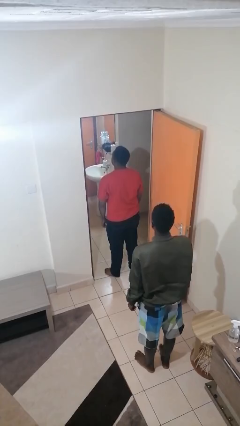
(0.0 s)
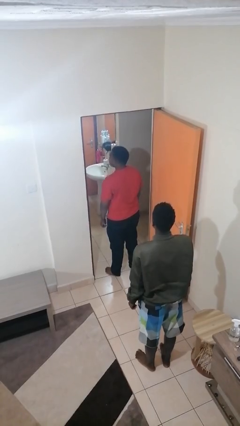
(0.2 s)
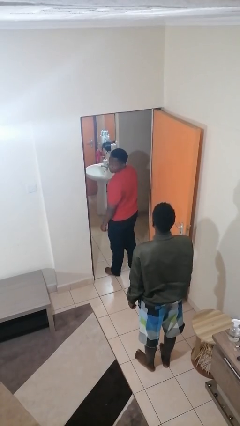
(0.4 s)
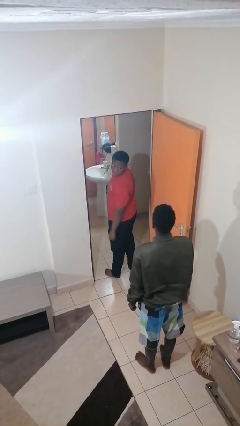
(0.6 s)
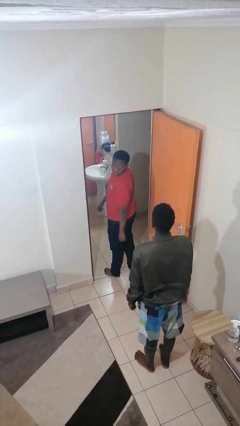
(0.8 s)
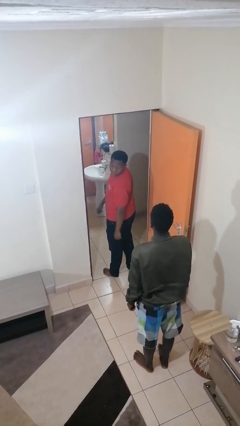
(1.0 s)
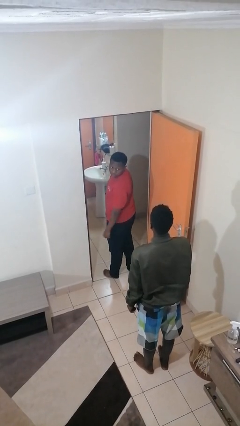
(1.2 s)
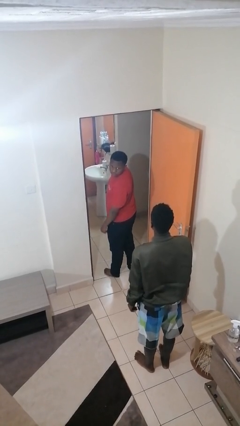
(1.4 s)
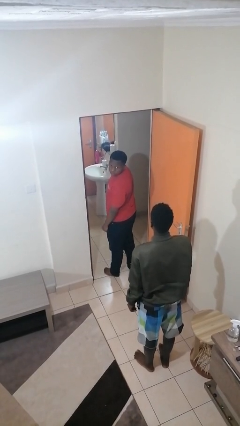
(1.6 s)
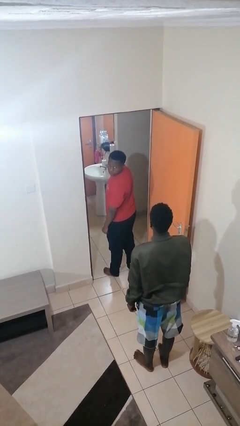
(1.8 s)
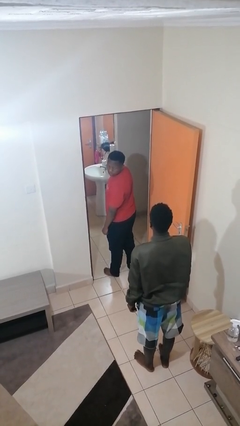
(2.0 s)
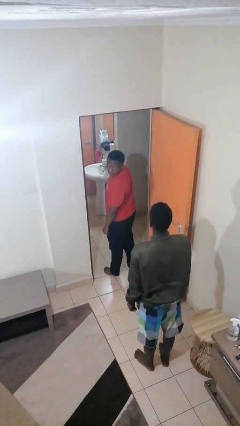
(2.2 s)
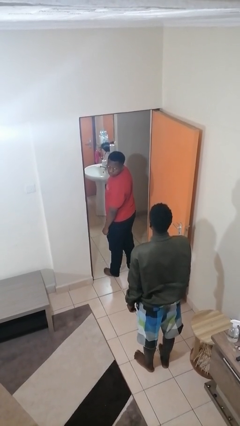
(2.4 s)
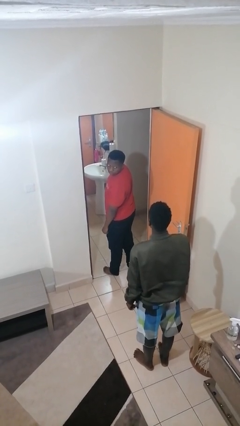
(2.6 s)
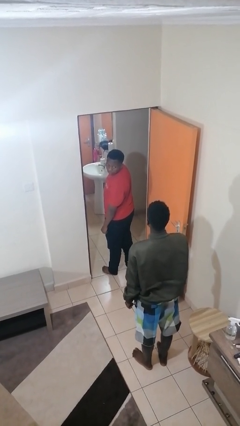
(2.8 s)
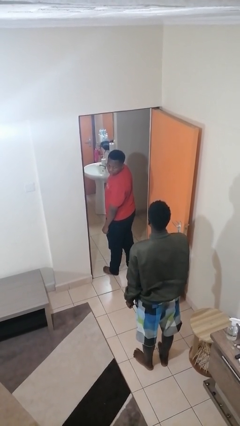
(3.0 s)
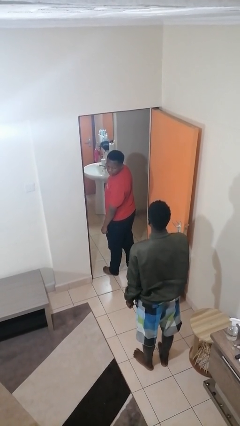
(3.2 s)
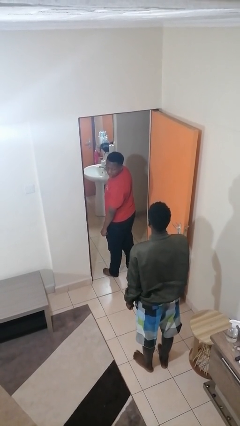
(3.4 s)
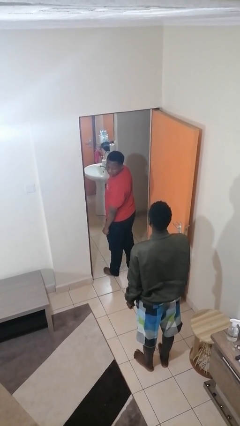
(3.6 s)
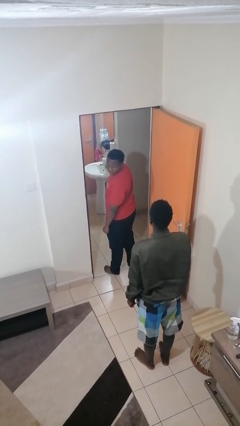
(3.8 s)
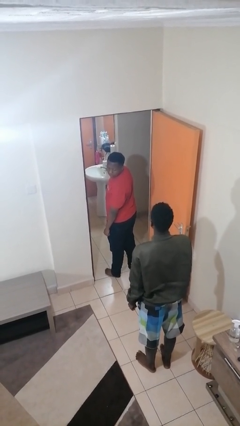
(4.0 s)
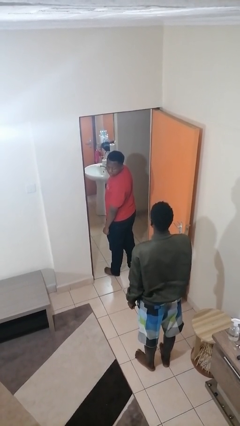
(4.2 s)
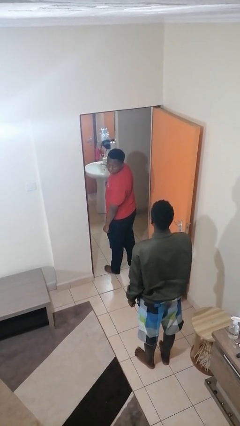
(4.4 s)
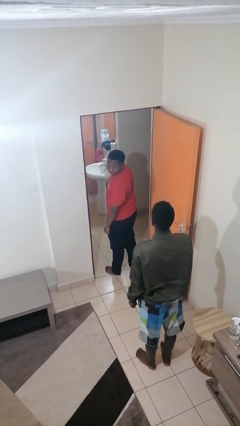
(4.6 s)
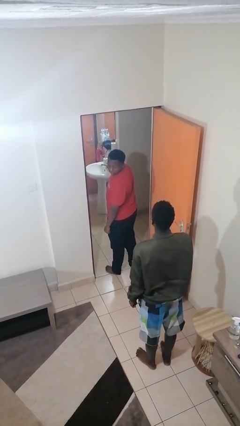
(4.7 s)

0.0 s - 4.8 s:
person looks over shoulder

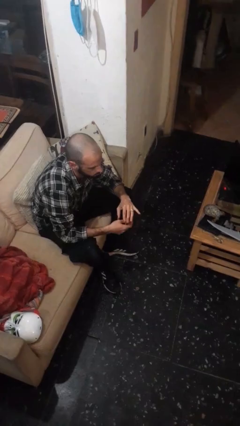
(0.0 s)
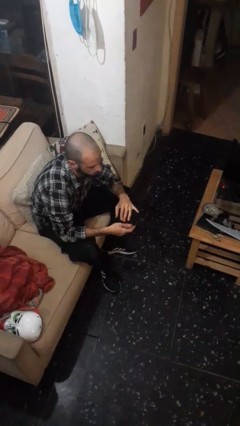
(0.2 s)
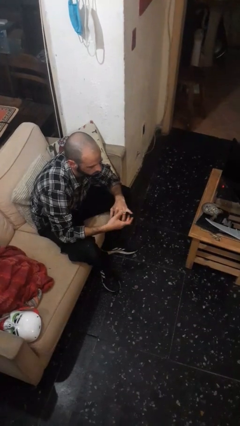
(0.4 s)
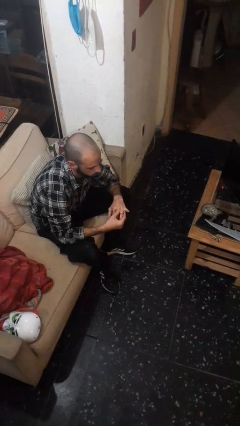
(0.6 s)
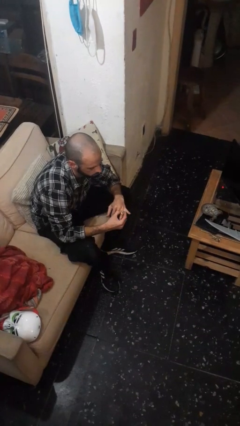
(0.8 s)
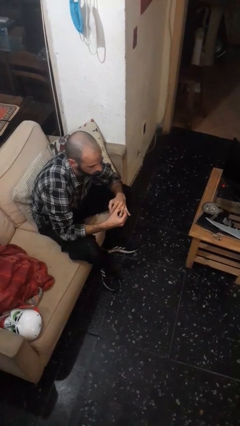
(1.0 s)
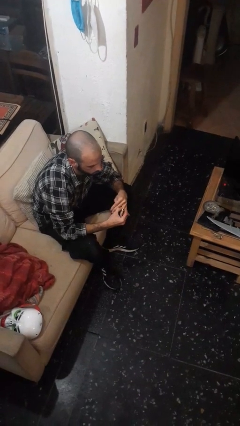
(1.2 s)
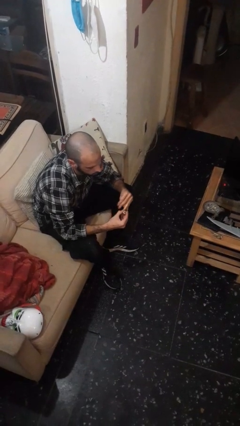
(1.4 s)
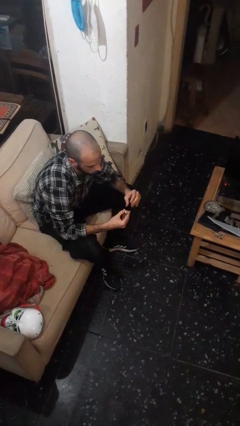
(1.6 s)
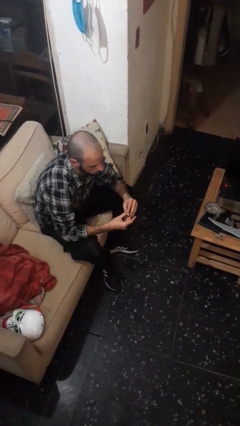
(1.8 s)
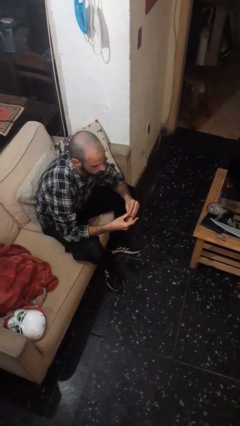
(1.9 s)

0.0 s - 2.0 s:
person takes off ring

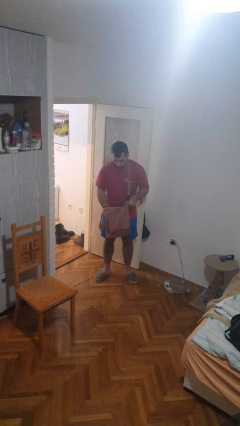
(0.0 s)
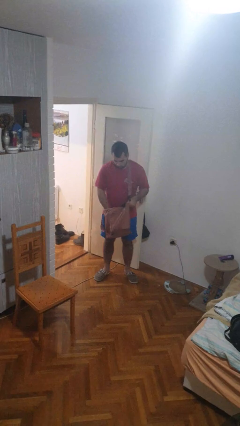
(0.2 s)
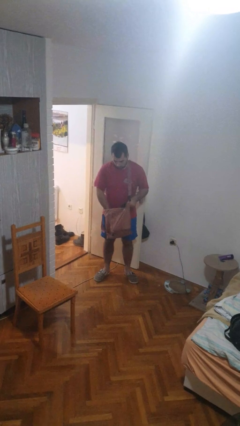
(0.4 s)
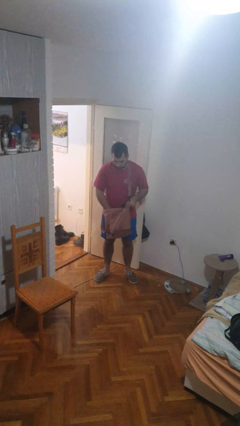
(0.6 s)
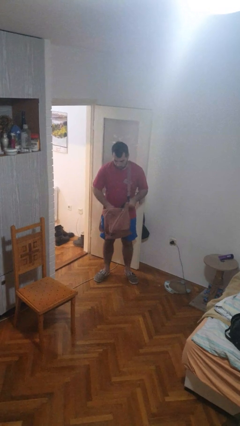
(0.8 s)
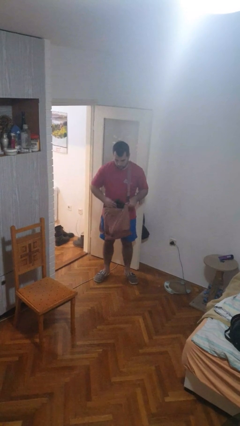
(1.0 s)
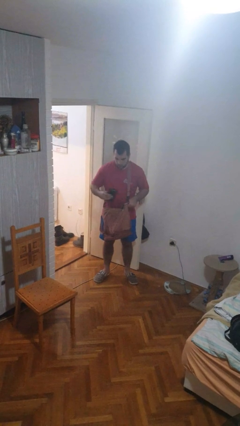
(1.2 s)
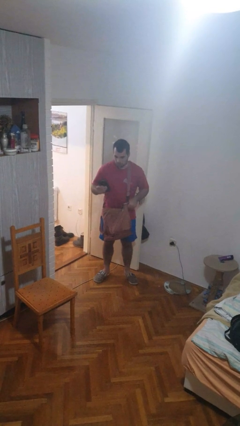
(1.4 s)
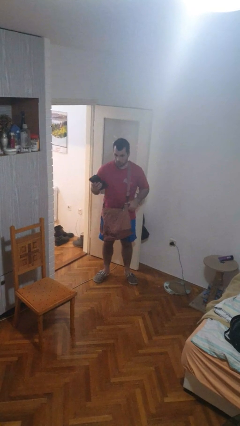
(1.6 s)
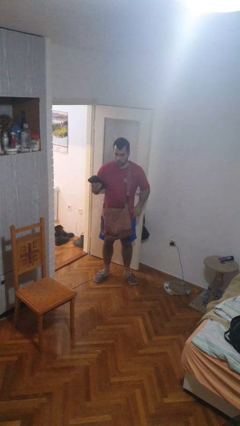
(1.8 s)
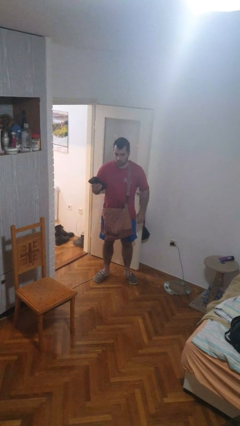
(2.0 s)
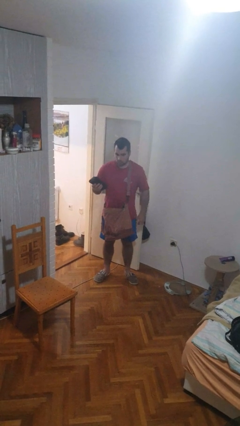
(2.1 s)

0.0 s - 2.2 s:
person takes object from purse

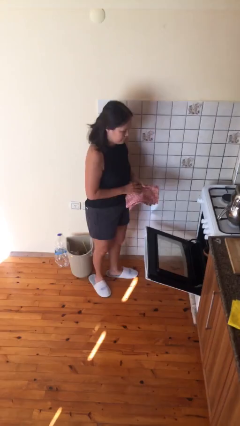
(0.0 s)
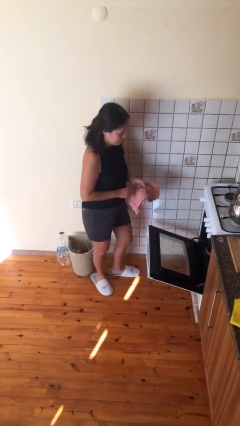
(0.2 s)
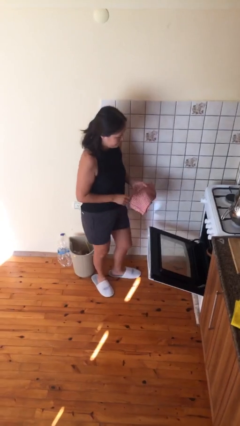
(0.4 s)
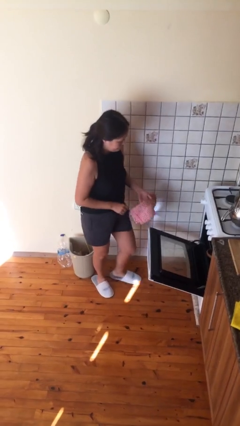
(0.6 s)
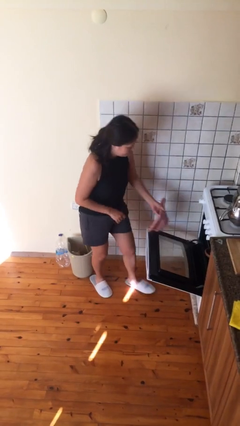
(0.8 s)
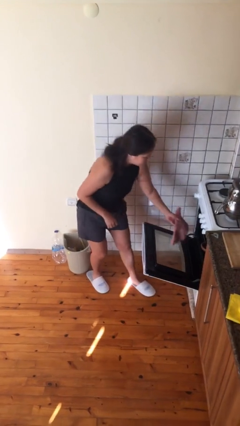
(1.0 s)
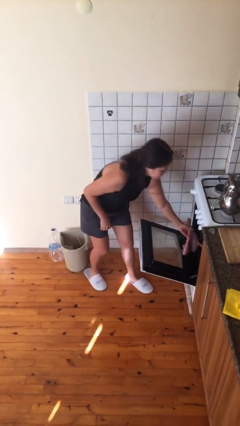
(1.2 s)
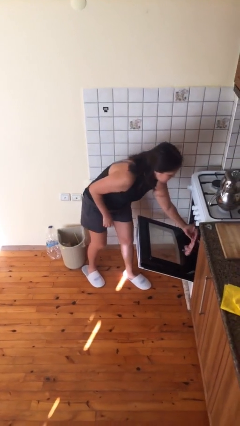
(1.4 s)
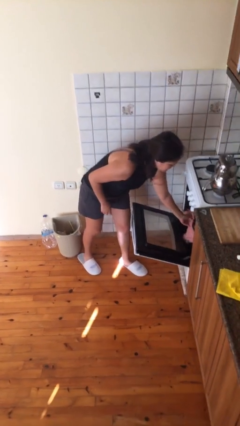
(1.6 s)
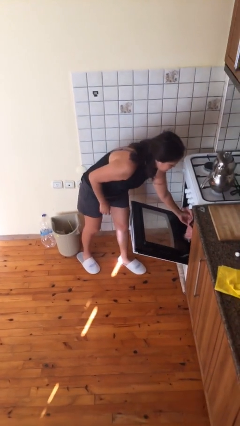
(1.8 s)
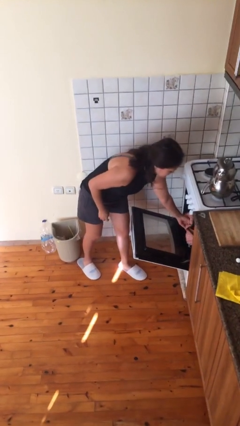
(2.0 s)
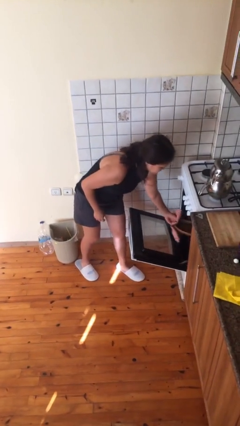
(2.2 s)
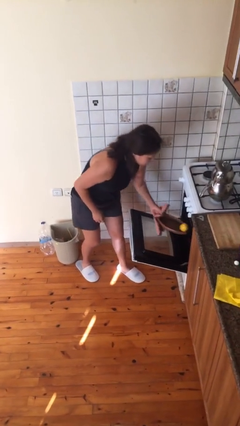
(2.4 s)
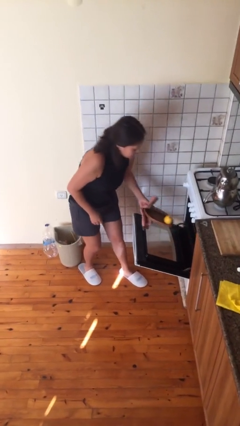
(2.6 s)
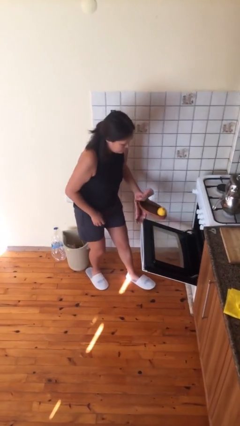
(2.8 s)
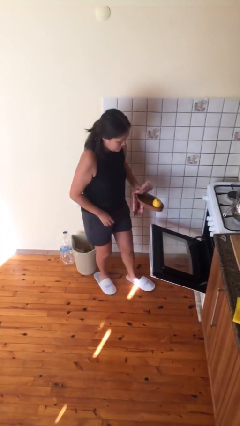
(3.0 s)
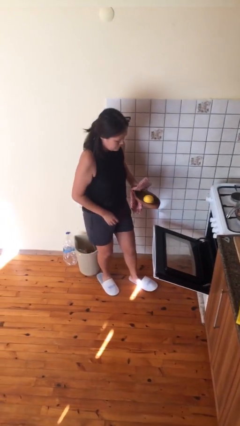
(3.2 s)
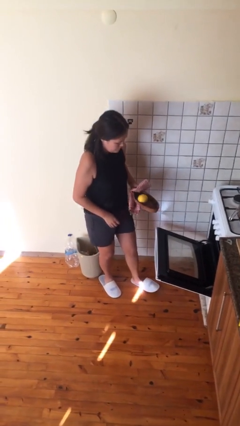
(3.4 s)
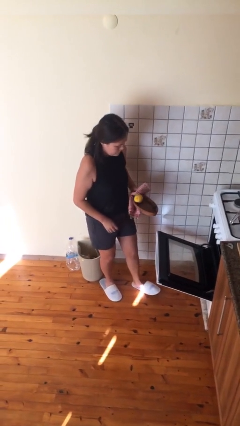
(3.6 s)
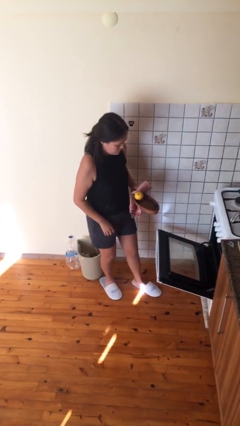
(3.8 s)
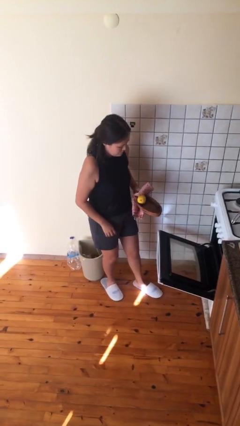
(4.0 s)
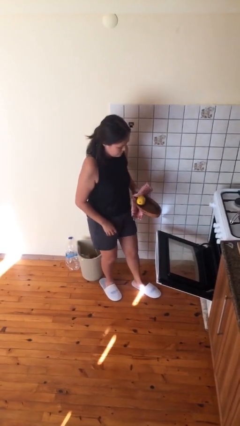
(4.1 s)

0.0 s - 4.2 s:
person takes object from oven

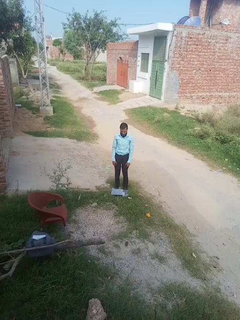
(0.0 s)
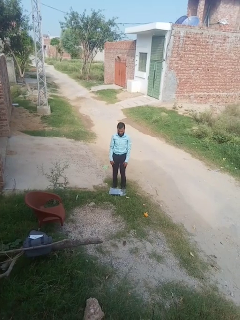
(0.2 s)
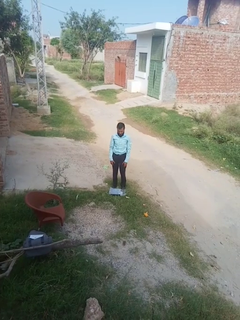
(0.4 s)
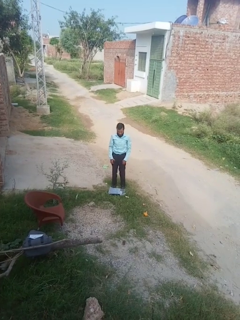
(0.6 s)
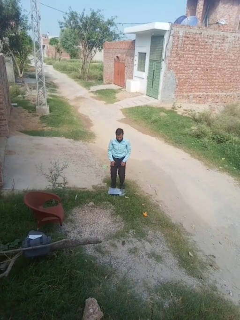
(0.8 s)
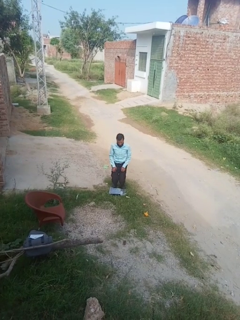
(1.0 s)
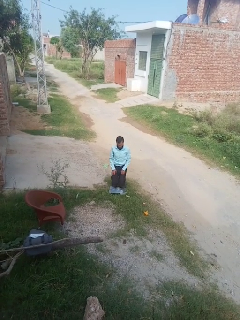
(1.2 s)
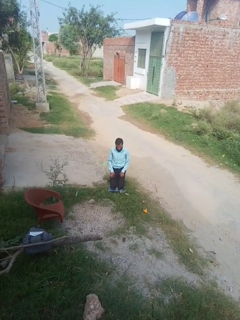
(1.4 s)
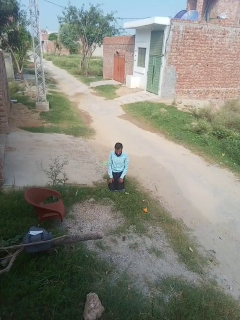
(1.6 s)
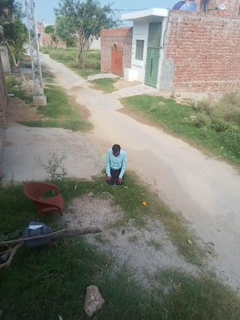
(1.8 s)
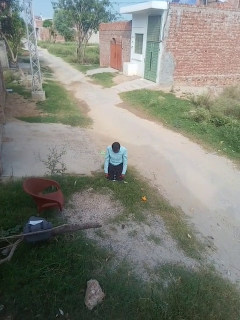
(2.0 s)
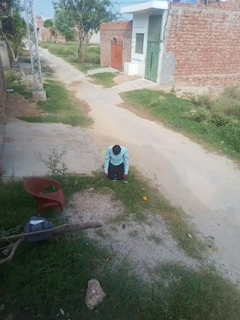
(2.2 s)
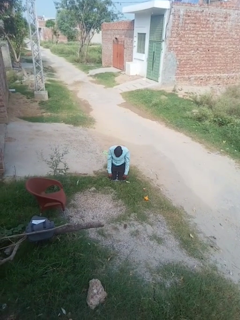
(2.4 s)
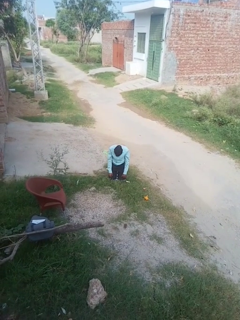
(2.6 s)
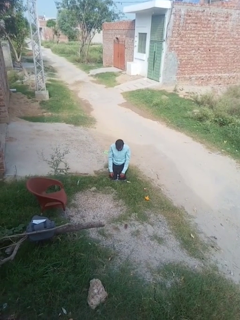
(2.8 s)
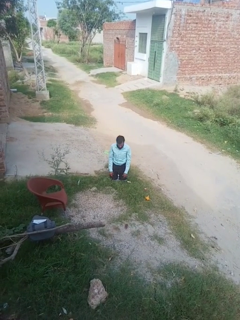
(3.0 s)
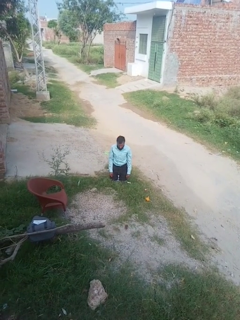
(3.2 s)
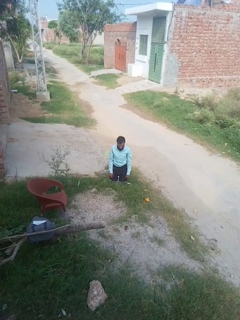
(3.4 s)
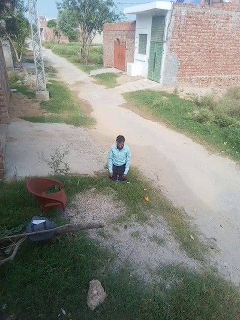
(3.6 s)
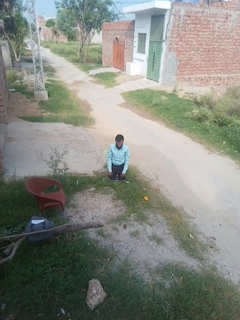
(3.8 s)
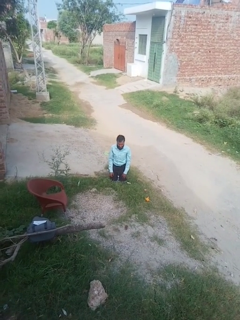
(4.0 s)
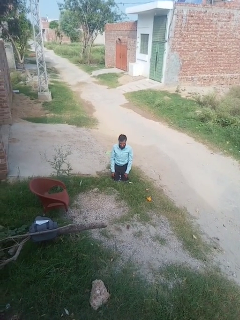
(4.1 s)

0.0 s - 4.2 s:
person kneels

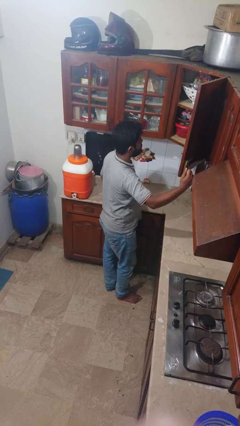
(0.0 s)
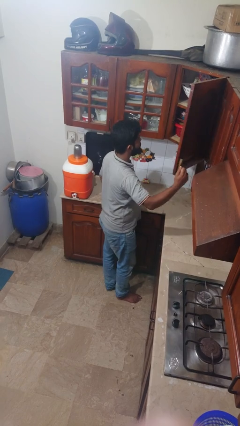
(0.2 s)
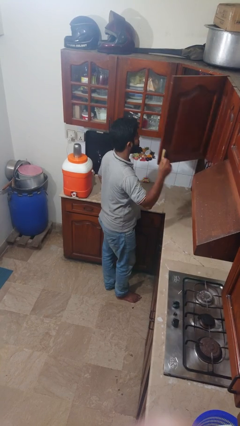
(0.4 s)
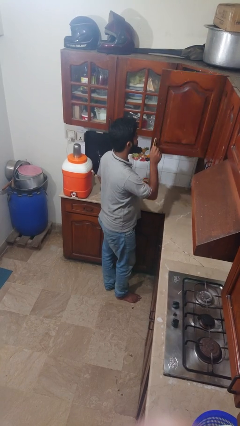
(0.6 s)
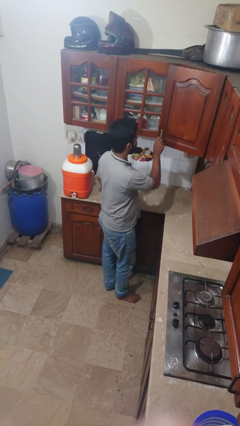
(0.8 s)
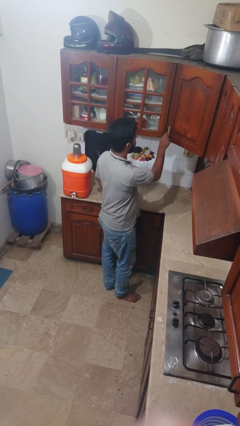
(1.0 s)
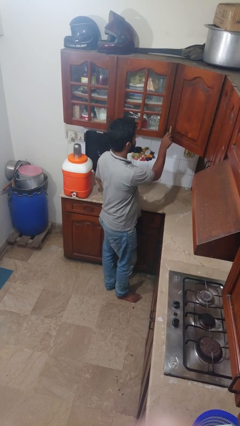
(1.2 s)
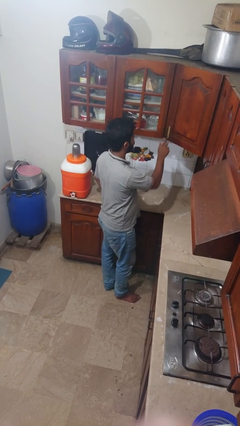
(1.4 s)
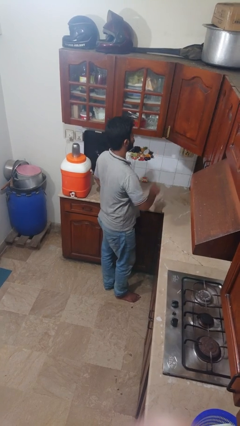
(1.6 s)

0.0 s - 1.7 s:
person closes cabinet
